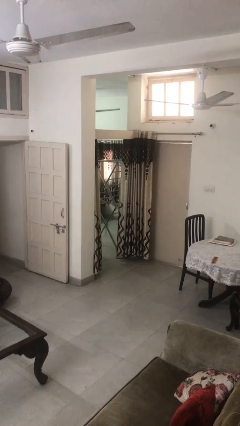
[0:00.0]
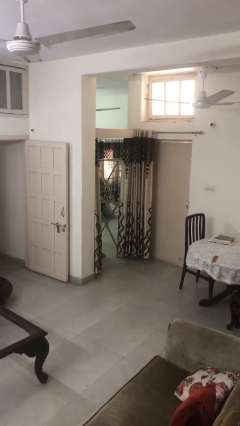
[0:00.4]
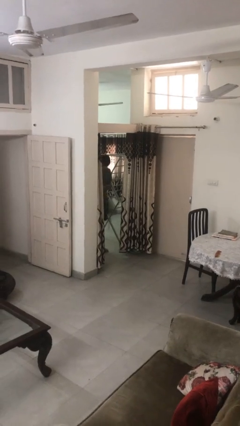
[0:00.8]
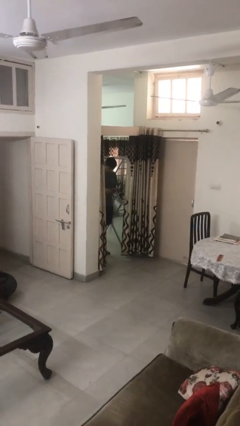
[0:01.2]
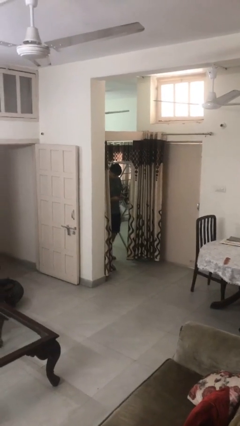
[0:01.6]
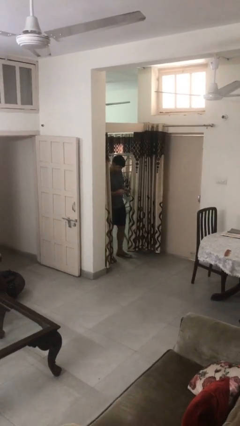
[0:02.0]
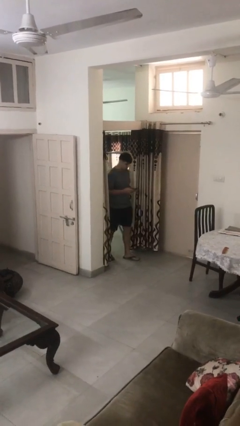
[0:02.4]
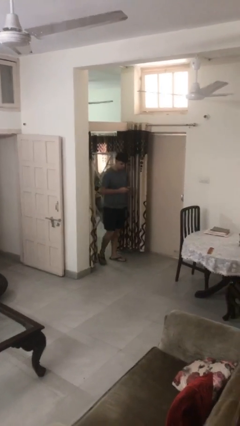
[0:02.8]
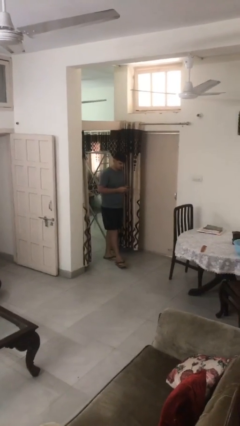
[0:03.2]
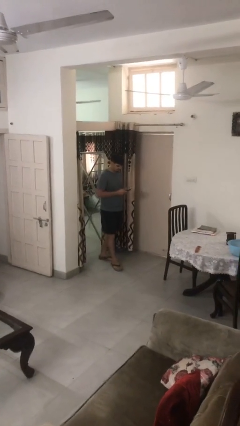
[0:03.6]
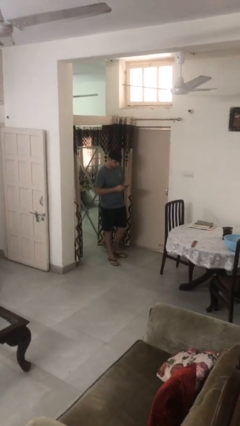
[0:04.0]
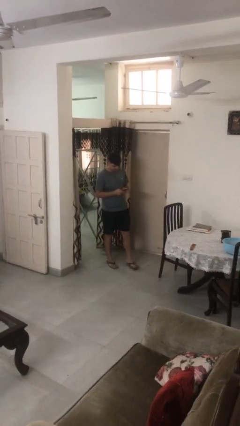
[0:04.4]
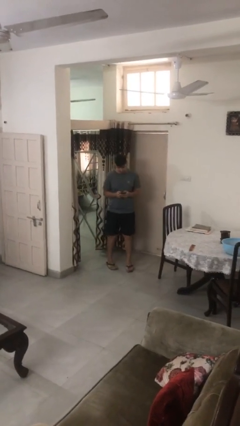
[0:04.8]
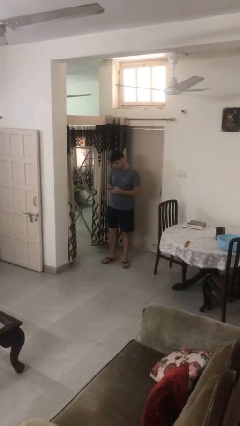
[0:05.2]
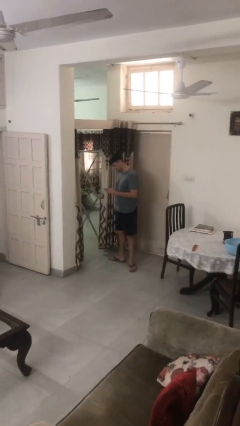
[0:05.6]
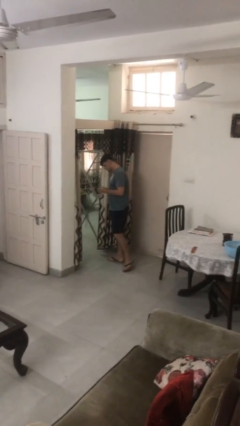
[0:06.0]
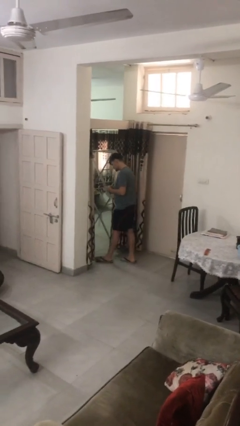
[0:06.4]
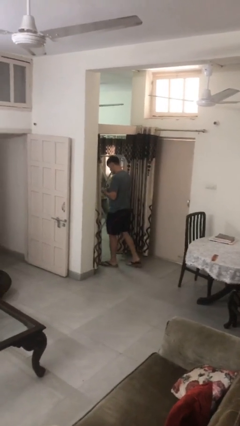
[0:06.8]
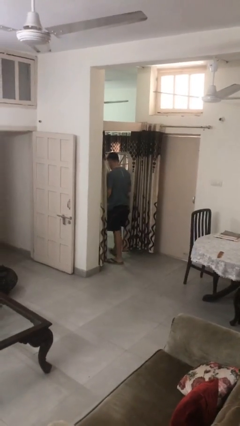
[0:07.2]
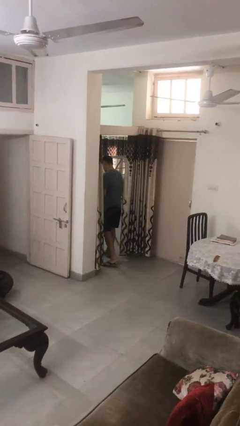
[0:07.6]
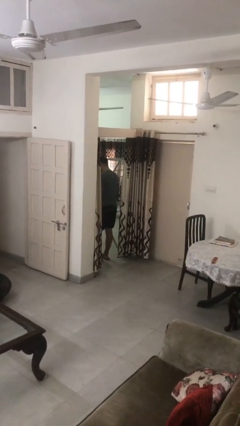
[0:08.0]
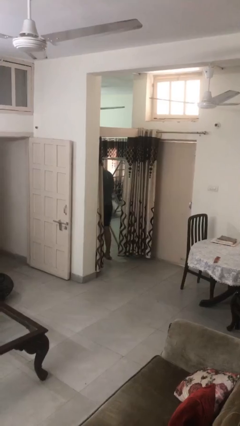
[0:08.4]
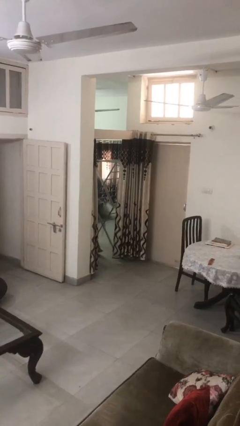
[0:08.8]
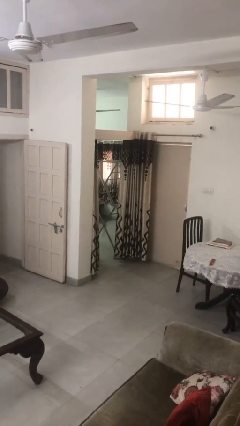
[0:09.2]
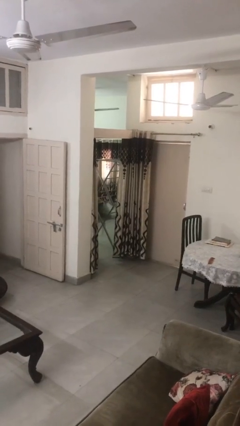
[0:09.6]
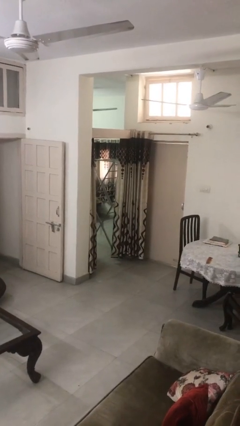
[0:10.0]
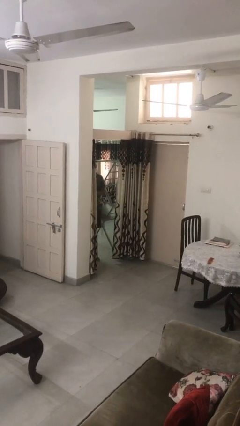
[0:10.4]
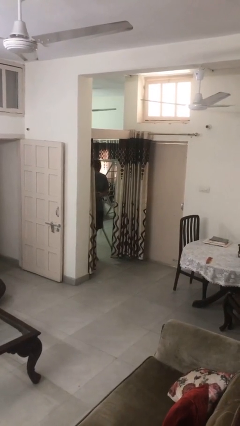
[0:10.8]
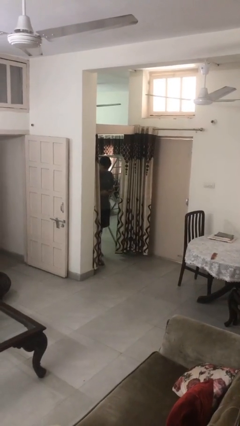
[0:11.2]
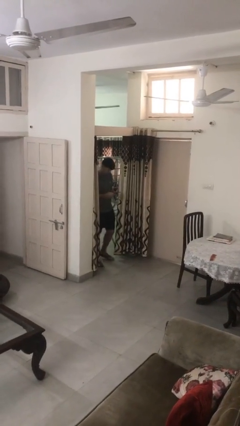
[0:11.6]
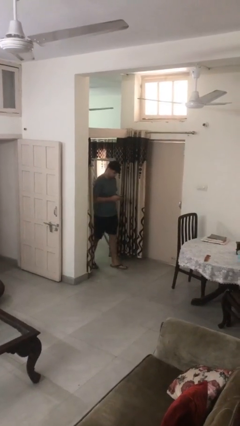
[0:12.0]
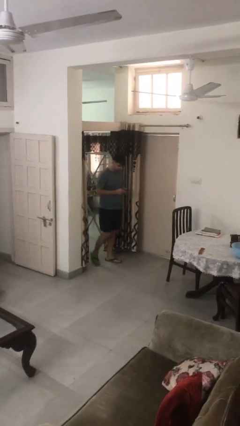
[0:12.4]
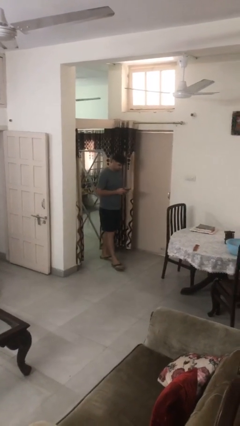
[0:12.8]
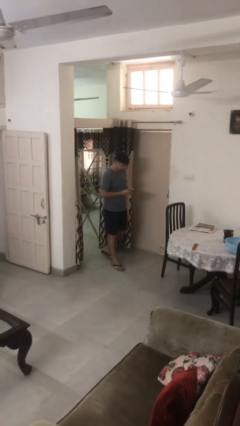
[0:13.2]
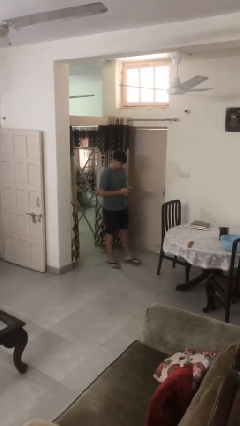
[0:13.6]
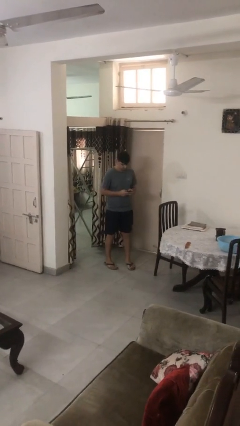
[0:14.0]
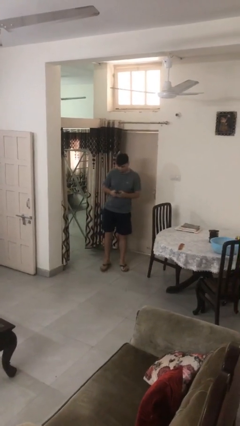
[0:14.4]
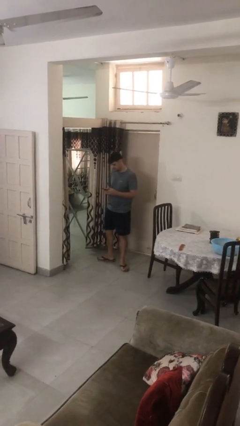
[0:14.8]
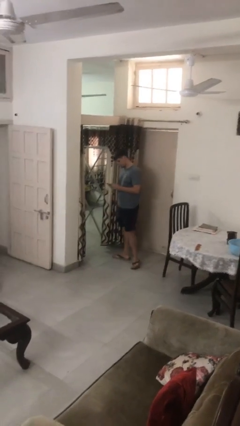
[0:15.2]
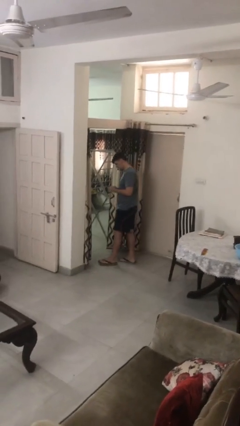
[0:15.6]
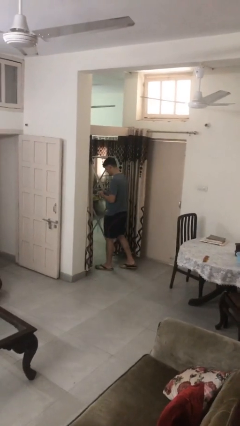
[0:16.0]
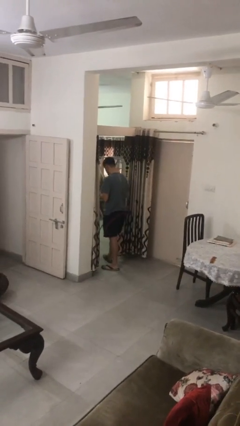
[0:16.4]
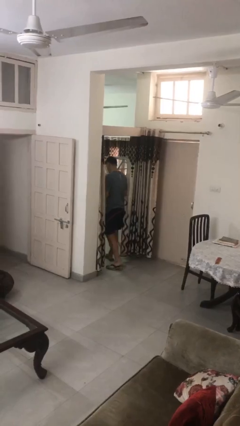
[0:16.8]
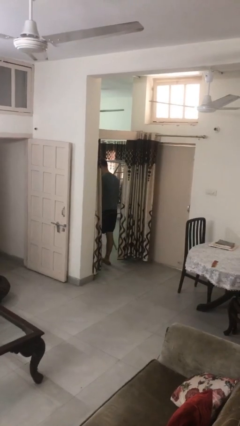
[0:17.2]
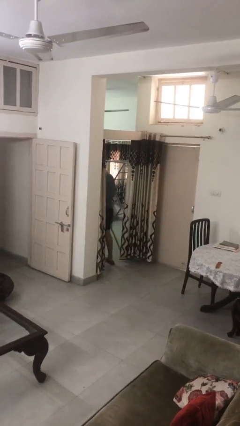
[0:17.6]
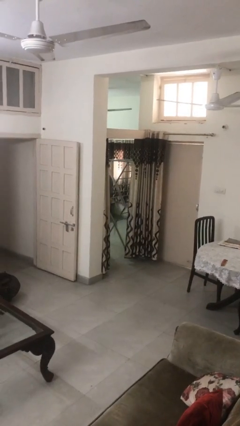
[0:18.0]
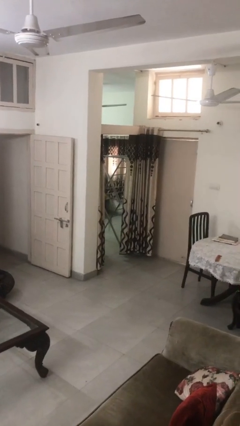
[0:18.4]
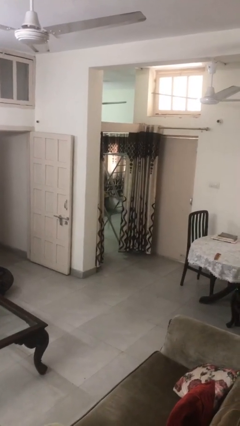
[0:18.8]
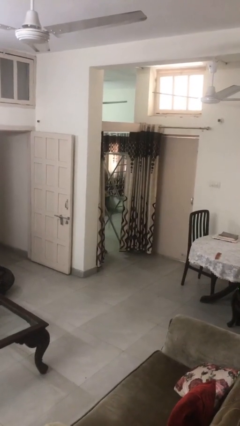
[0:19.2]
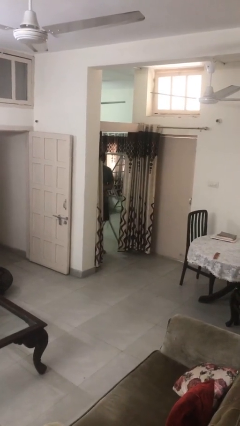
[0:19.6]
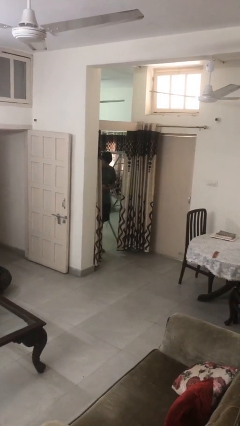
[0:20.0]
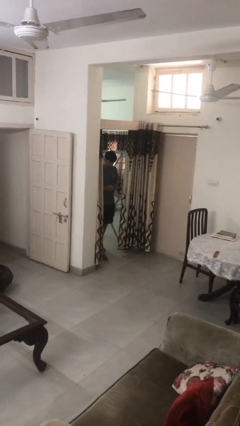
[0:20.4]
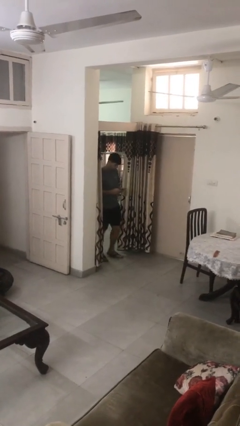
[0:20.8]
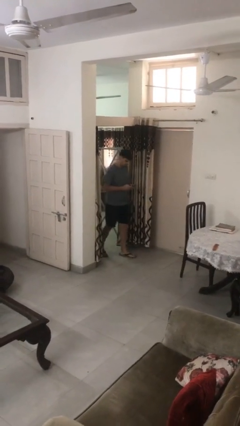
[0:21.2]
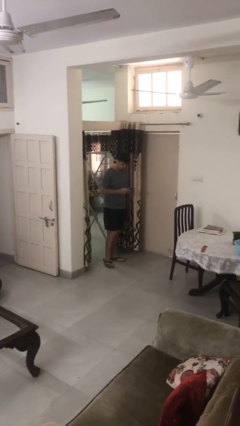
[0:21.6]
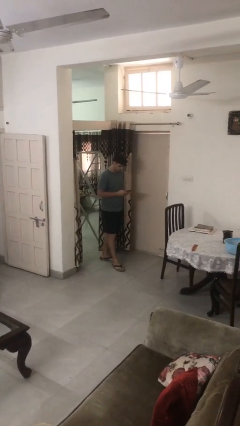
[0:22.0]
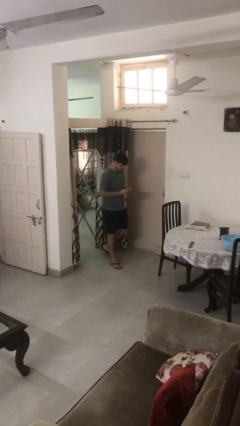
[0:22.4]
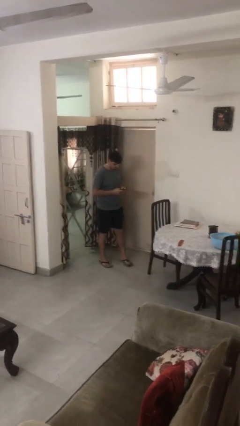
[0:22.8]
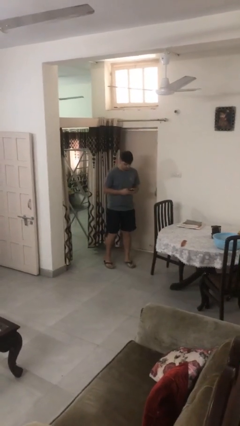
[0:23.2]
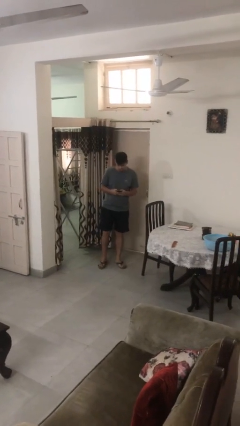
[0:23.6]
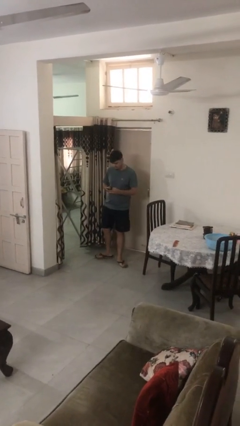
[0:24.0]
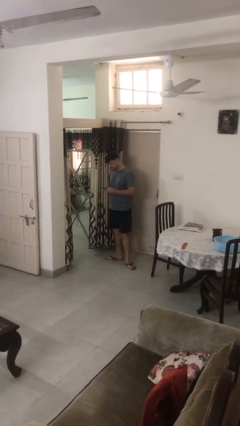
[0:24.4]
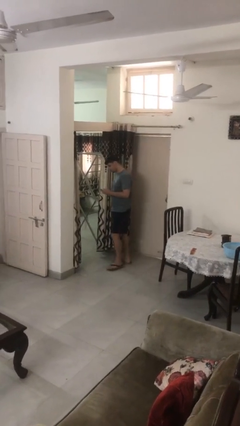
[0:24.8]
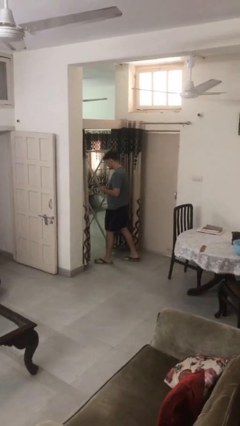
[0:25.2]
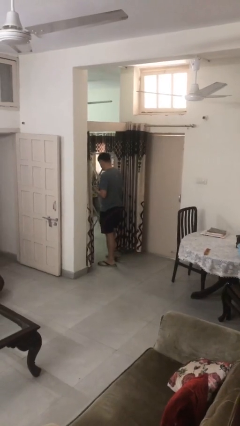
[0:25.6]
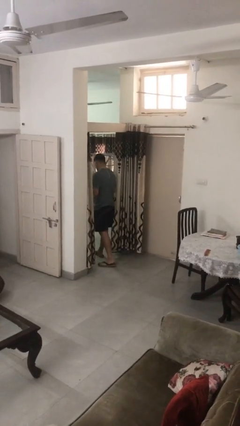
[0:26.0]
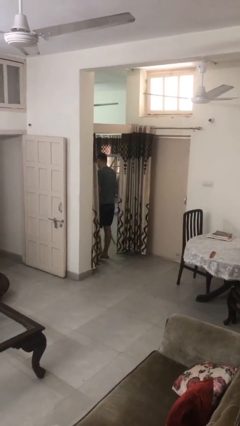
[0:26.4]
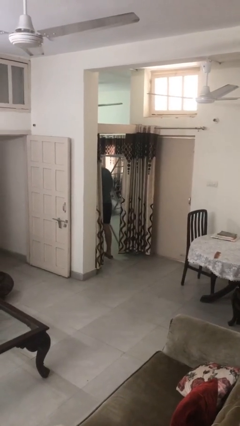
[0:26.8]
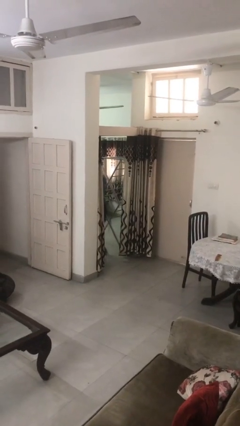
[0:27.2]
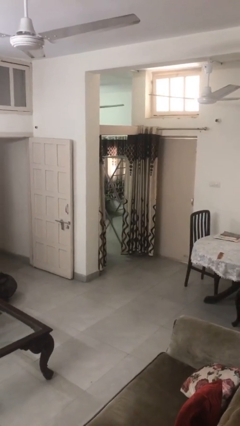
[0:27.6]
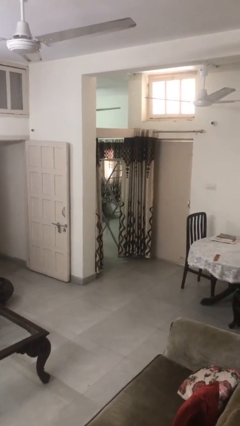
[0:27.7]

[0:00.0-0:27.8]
person texts on phone

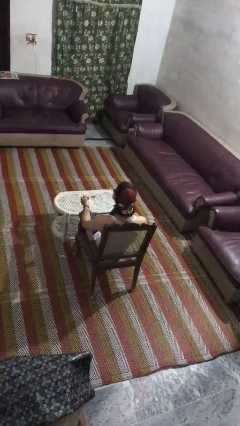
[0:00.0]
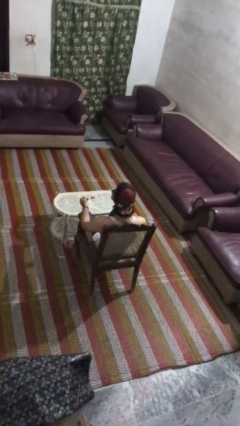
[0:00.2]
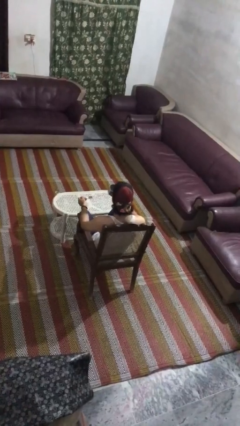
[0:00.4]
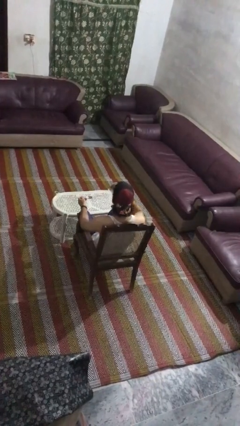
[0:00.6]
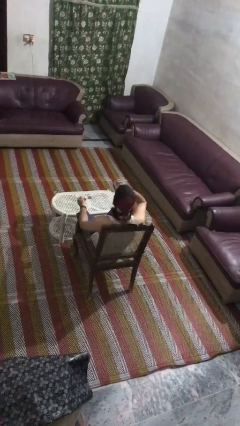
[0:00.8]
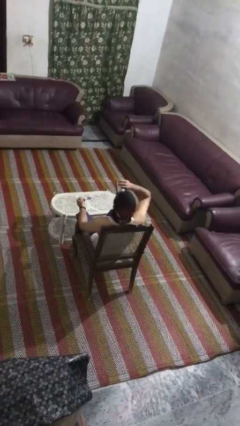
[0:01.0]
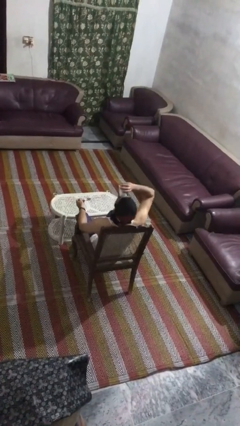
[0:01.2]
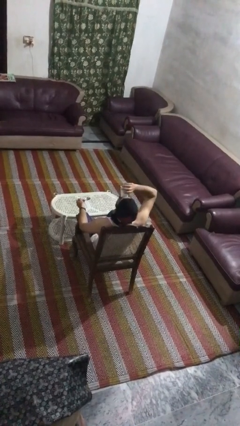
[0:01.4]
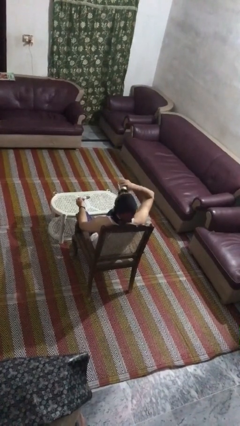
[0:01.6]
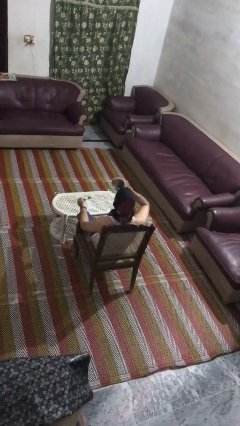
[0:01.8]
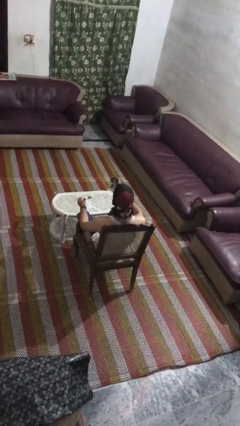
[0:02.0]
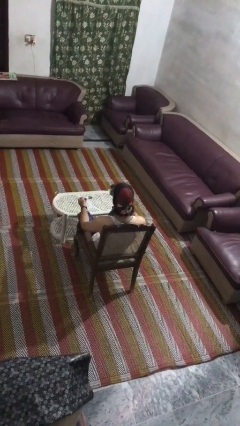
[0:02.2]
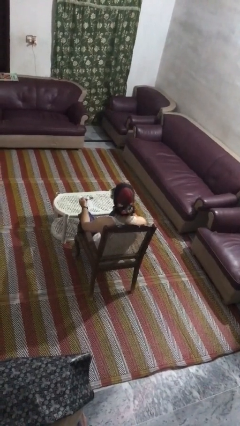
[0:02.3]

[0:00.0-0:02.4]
person drinks from mug

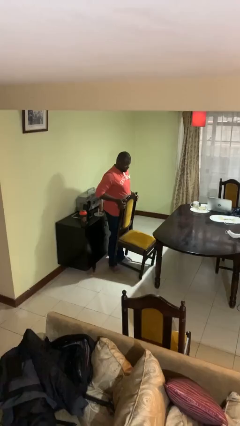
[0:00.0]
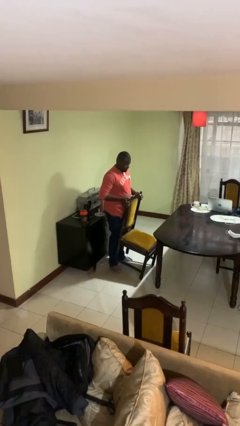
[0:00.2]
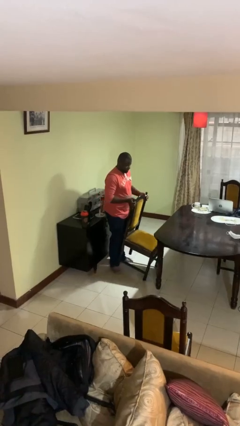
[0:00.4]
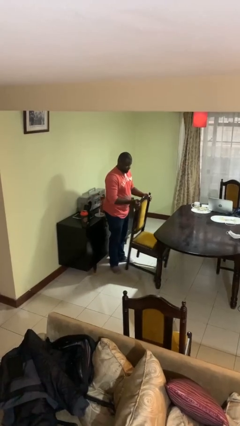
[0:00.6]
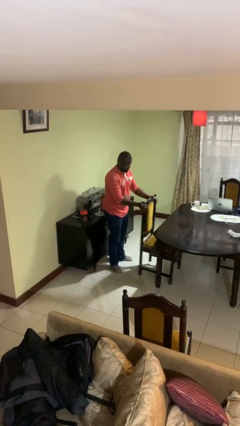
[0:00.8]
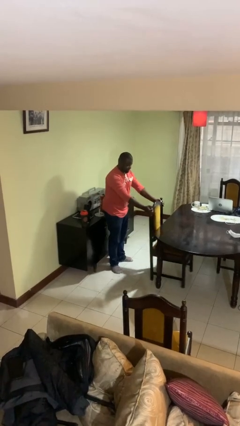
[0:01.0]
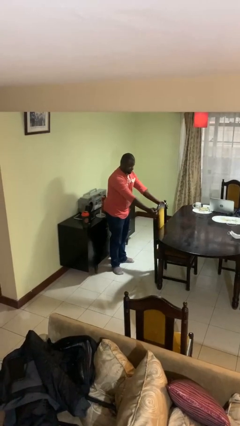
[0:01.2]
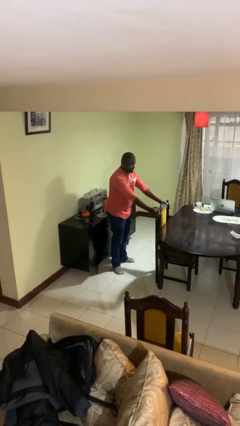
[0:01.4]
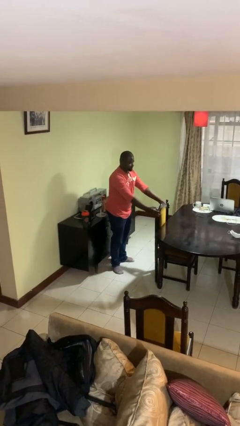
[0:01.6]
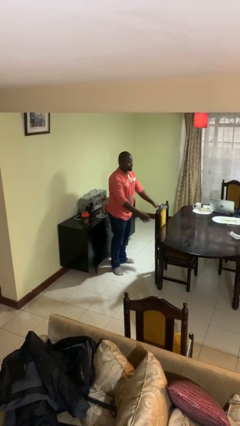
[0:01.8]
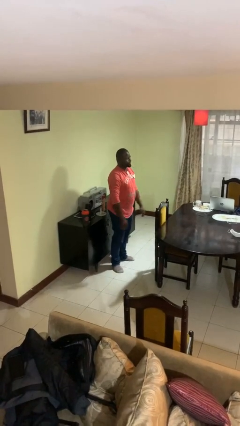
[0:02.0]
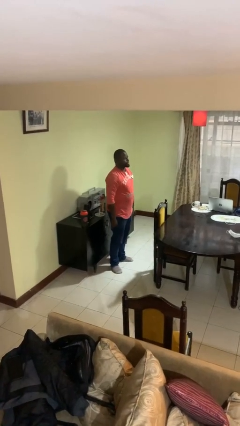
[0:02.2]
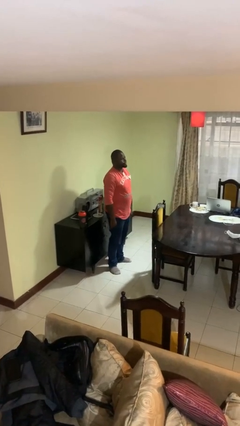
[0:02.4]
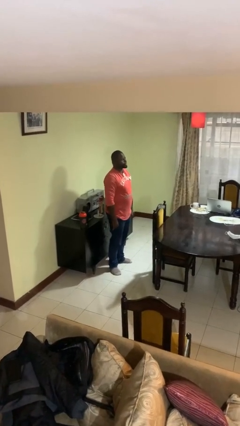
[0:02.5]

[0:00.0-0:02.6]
person pushes in chair
